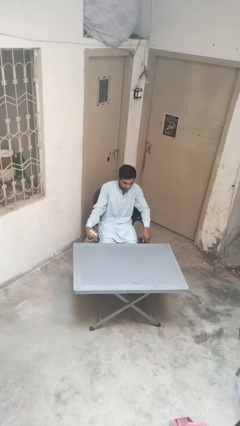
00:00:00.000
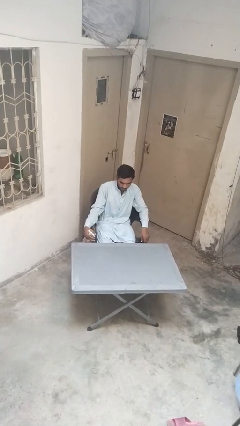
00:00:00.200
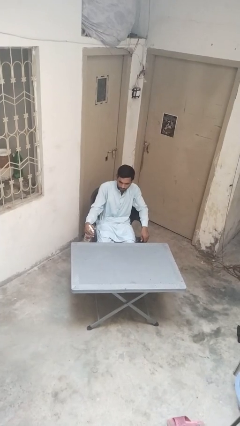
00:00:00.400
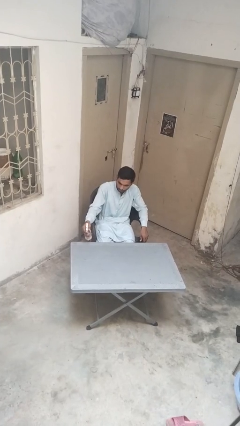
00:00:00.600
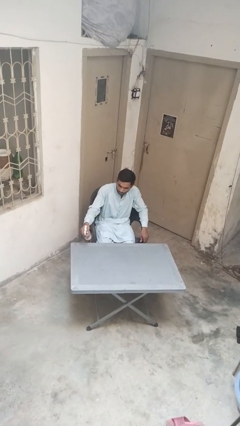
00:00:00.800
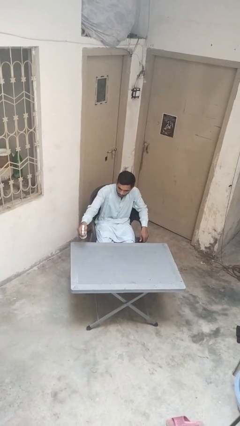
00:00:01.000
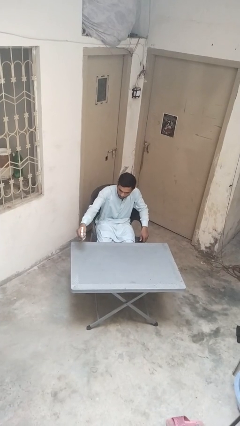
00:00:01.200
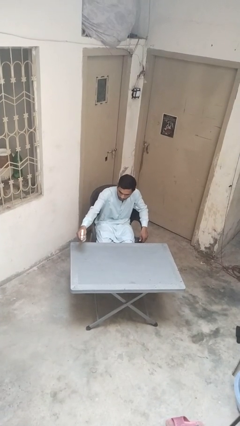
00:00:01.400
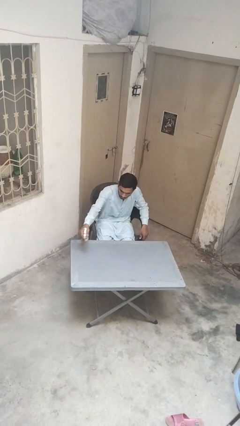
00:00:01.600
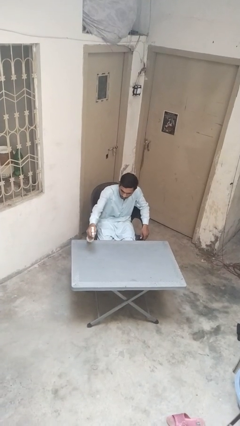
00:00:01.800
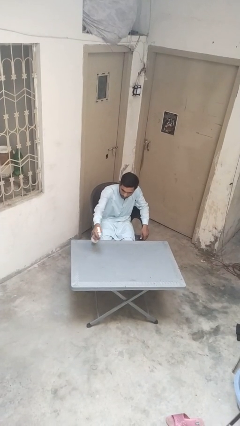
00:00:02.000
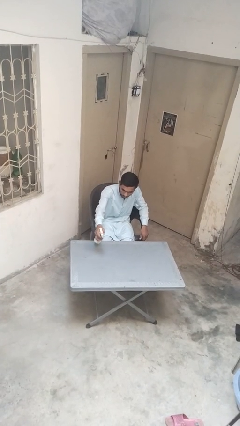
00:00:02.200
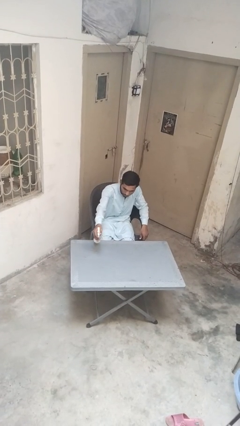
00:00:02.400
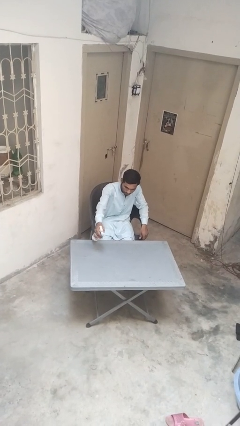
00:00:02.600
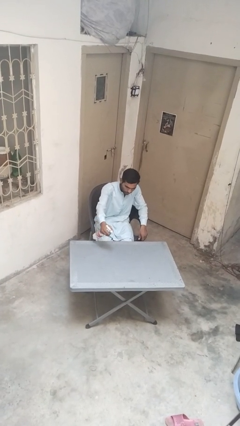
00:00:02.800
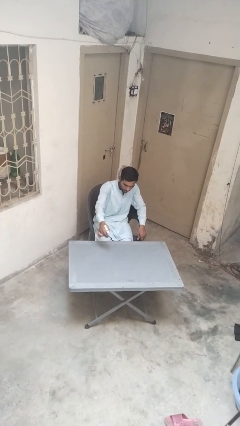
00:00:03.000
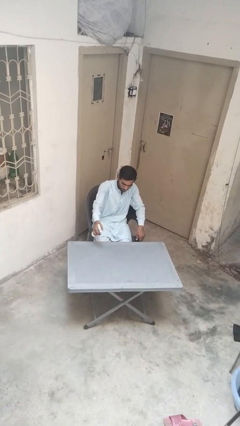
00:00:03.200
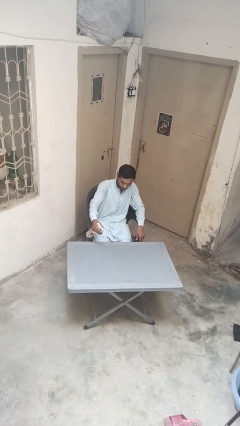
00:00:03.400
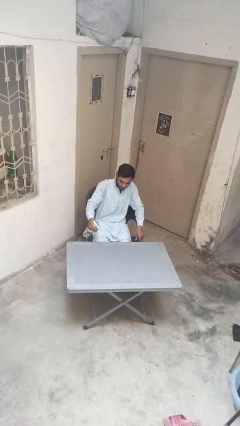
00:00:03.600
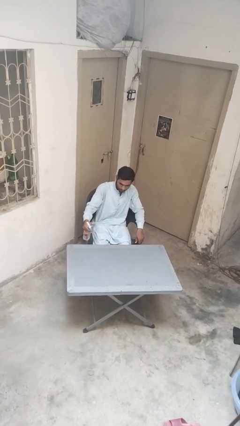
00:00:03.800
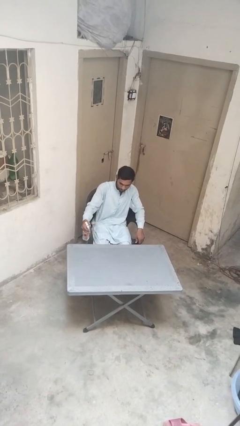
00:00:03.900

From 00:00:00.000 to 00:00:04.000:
person sprays from bottle

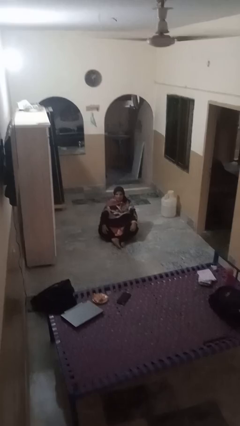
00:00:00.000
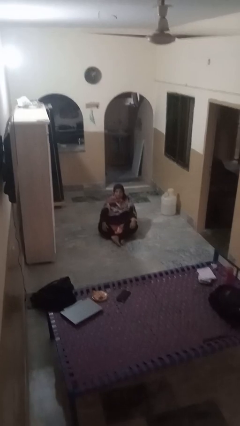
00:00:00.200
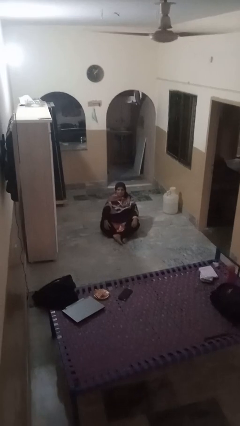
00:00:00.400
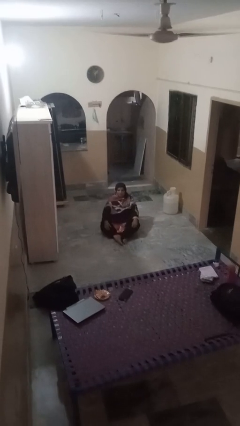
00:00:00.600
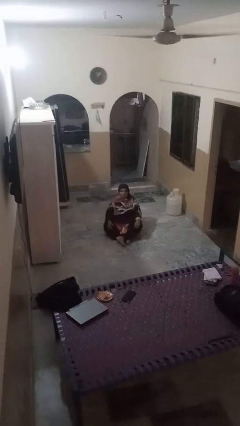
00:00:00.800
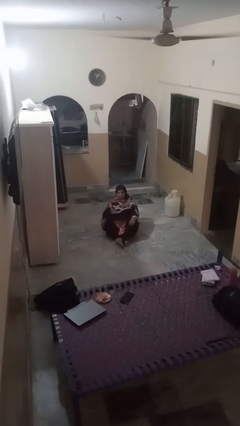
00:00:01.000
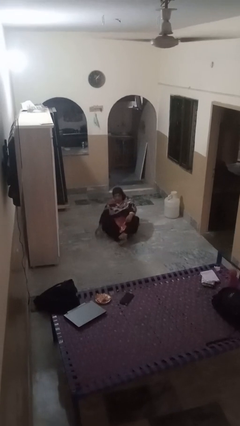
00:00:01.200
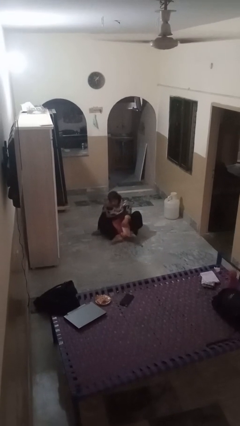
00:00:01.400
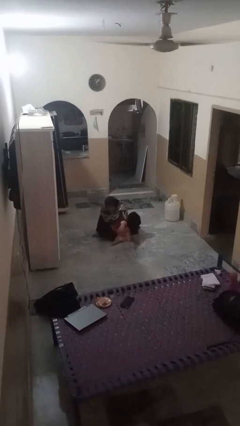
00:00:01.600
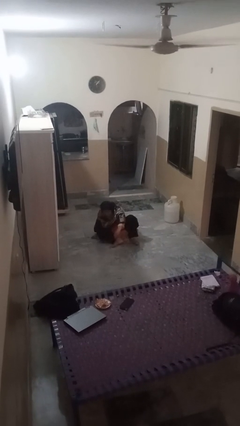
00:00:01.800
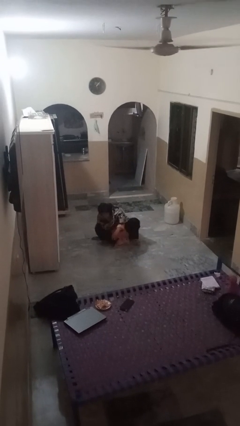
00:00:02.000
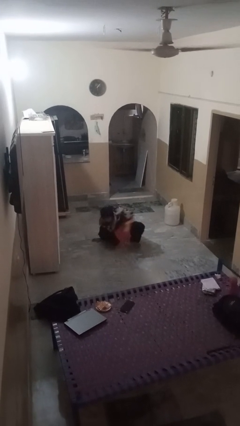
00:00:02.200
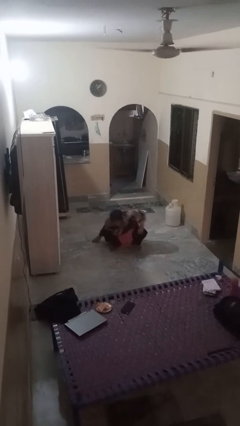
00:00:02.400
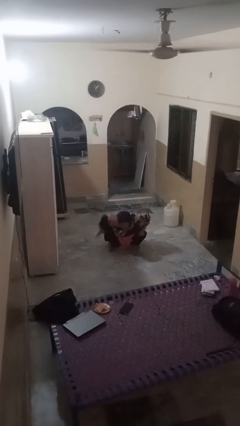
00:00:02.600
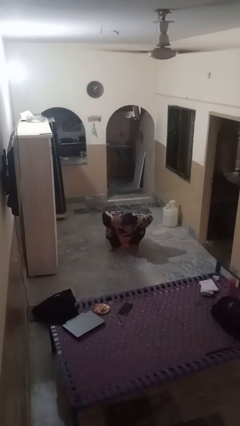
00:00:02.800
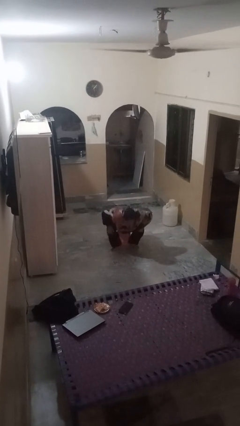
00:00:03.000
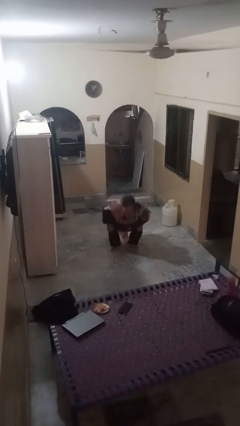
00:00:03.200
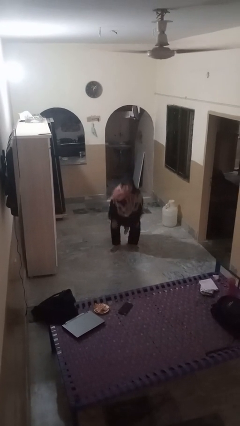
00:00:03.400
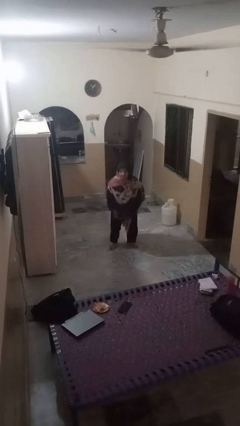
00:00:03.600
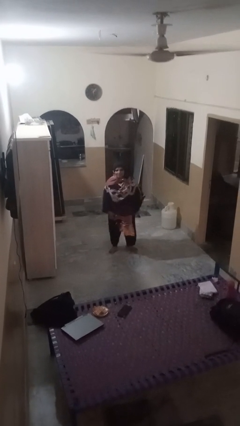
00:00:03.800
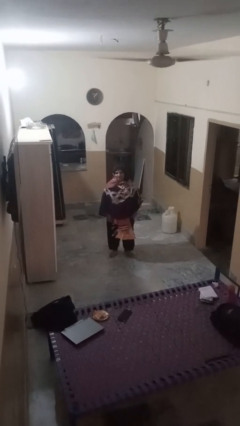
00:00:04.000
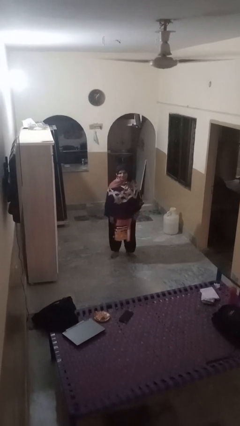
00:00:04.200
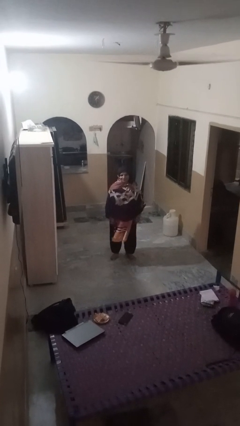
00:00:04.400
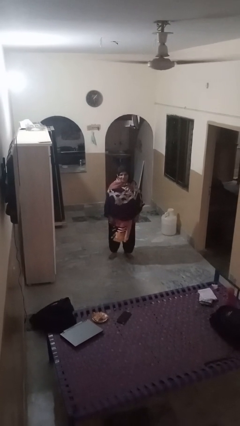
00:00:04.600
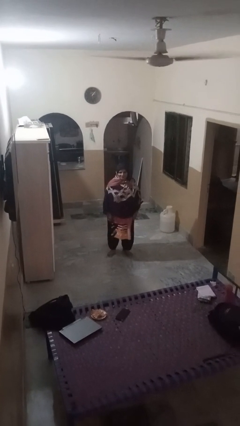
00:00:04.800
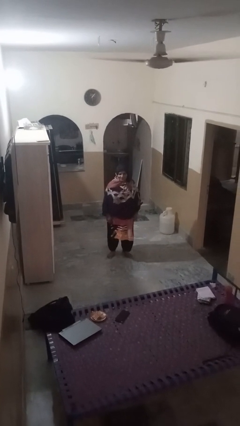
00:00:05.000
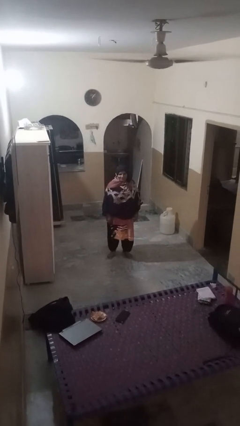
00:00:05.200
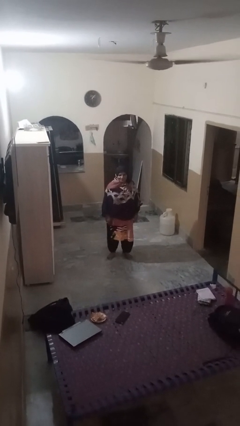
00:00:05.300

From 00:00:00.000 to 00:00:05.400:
person stands up from floor

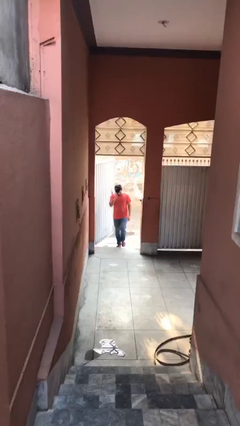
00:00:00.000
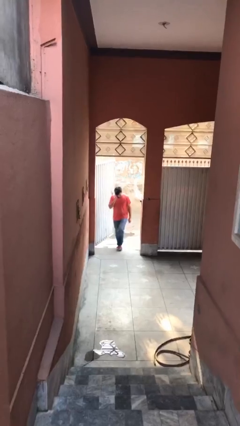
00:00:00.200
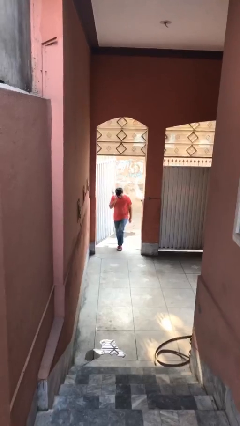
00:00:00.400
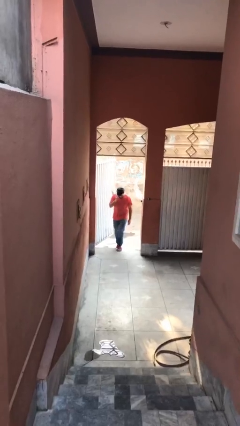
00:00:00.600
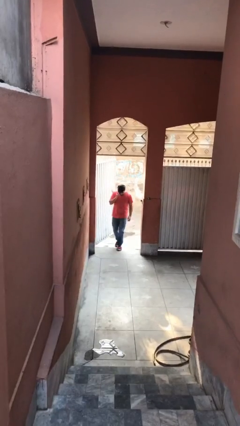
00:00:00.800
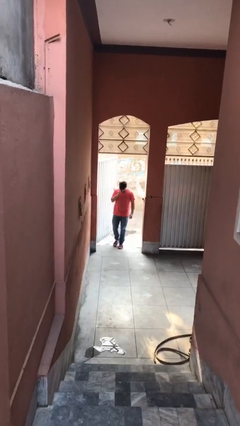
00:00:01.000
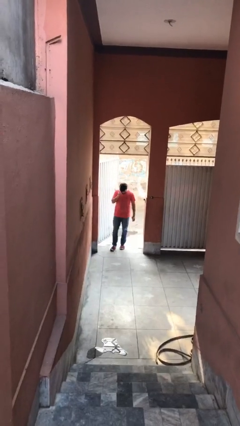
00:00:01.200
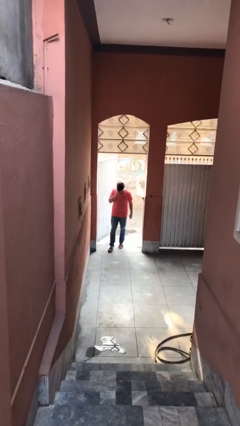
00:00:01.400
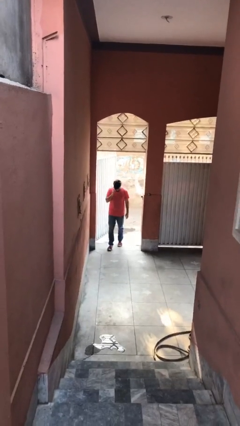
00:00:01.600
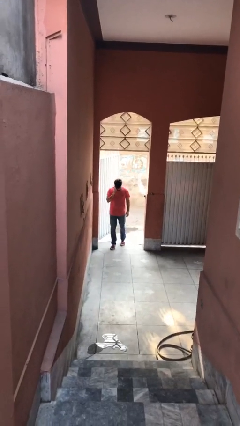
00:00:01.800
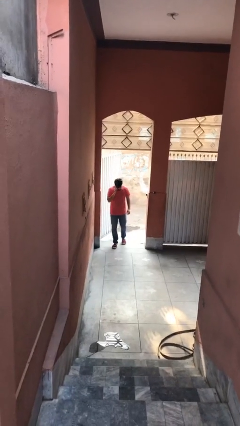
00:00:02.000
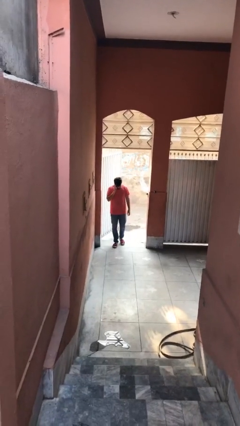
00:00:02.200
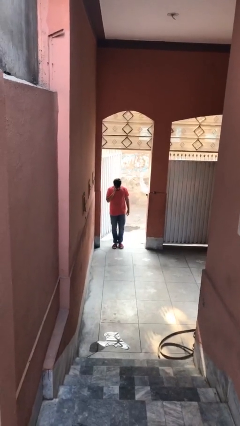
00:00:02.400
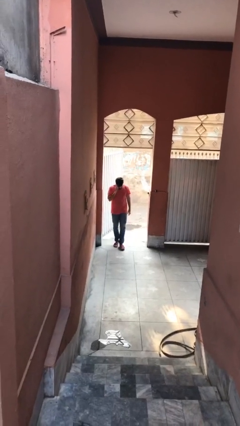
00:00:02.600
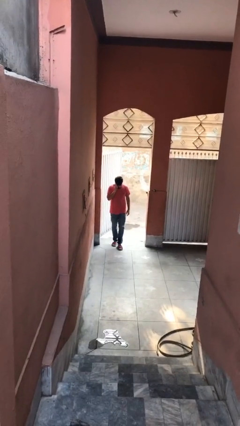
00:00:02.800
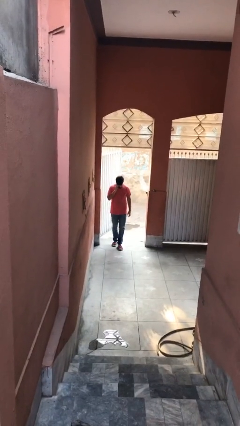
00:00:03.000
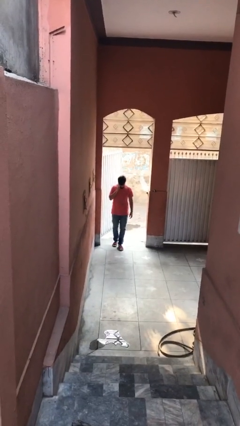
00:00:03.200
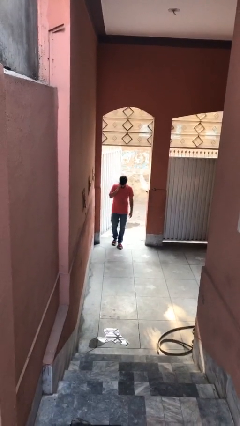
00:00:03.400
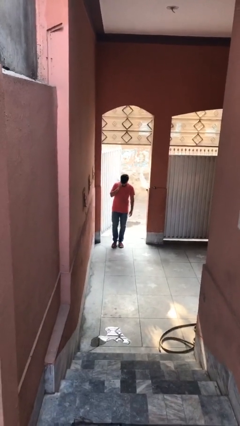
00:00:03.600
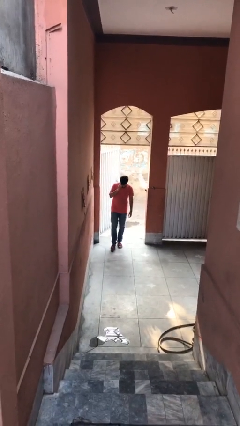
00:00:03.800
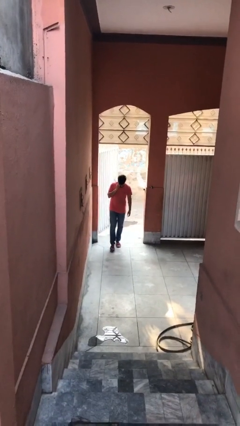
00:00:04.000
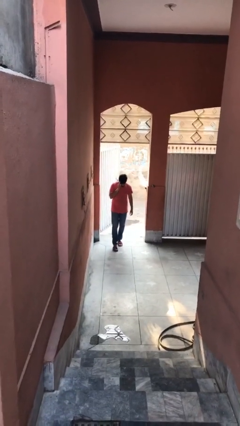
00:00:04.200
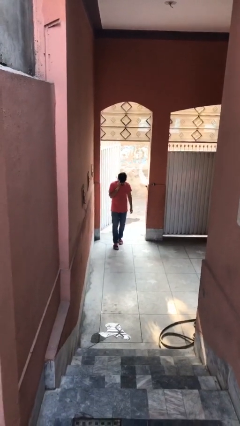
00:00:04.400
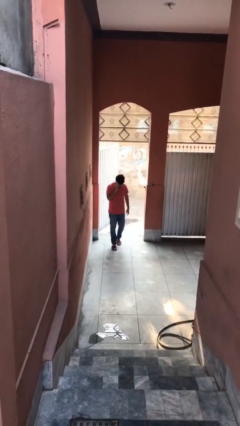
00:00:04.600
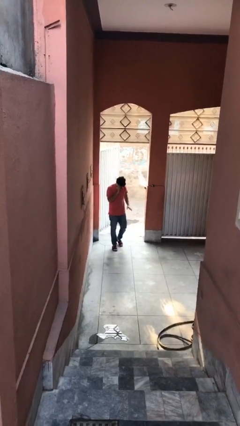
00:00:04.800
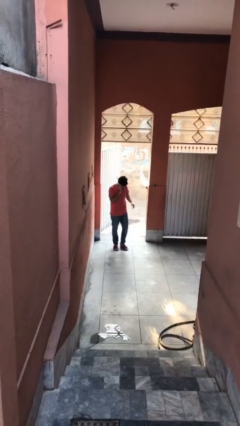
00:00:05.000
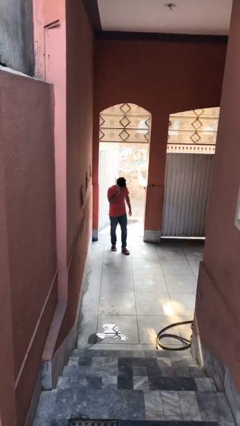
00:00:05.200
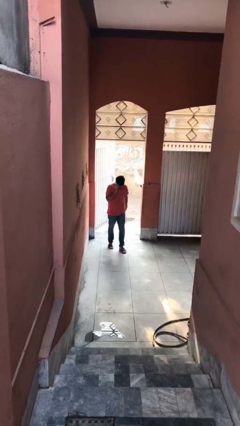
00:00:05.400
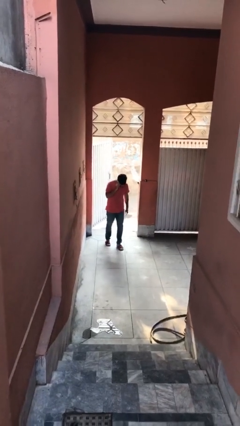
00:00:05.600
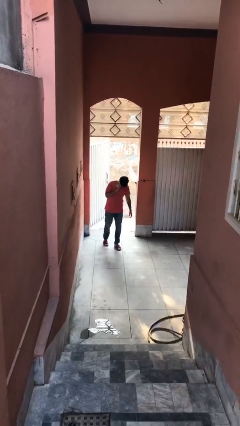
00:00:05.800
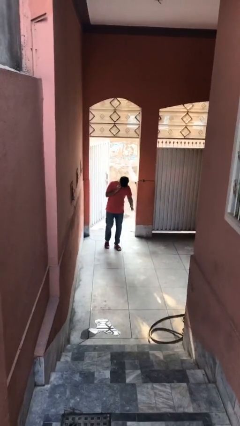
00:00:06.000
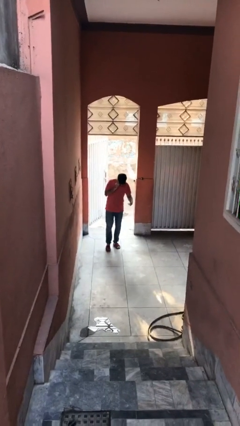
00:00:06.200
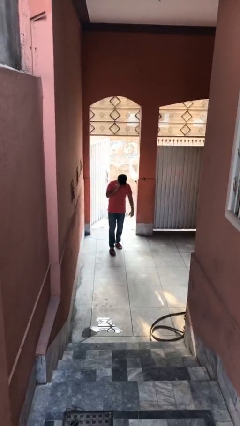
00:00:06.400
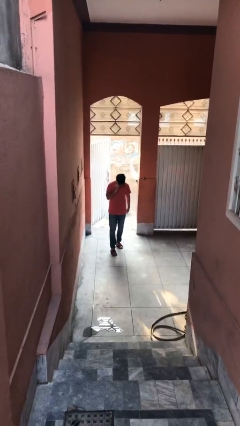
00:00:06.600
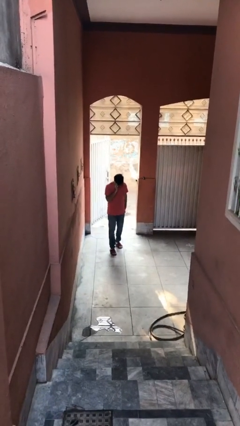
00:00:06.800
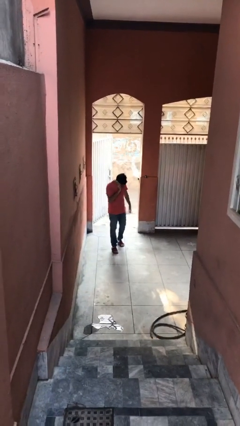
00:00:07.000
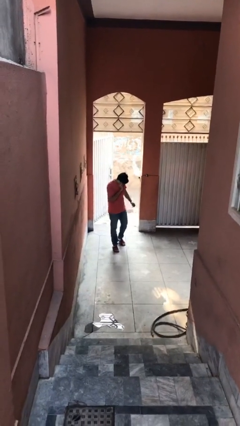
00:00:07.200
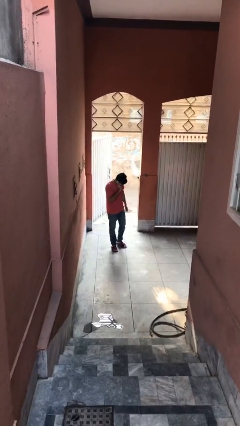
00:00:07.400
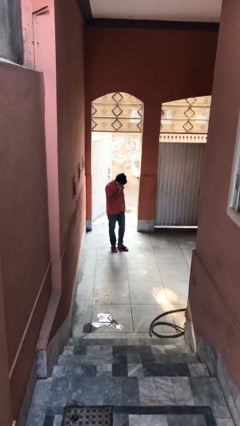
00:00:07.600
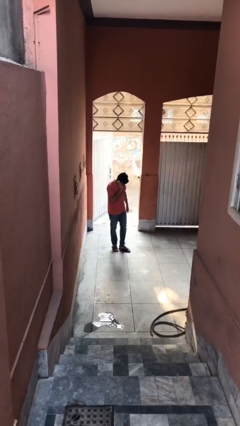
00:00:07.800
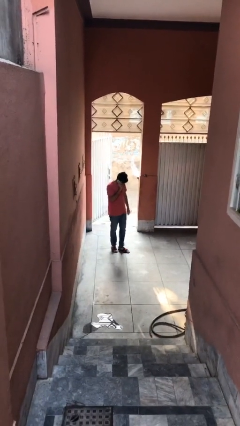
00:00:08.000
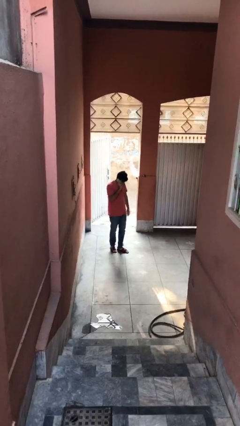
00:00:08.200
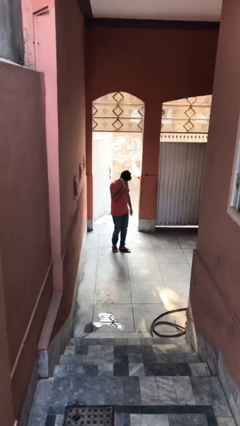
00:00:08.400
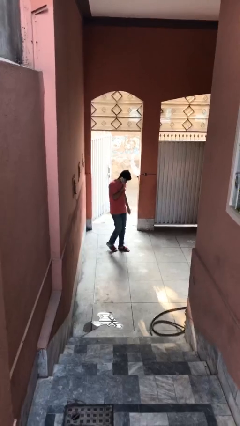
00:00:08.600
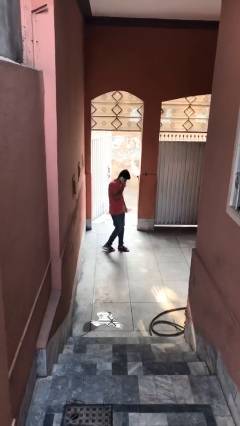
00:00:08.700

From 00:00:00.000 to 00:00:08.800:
person enters scene through structure

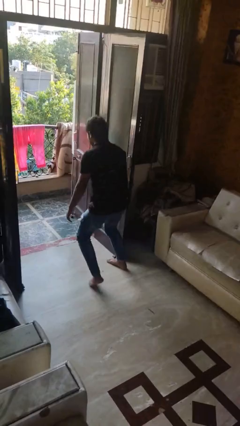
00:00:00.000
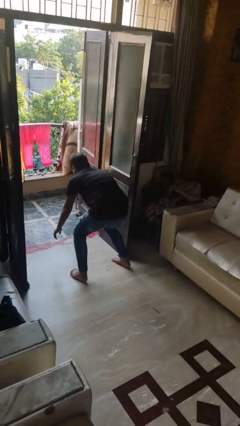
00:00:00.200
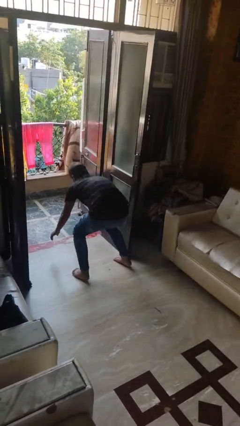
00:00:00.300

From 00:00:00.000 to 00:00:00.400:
person trips on object on floor
